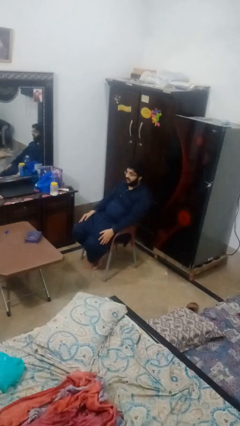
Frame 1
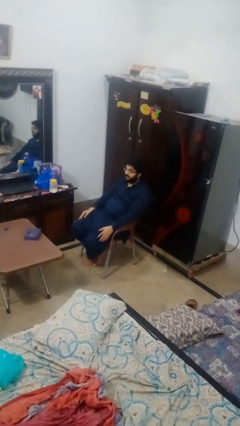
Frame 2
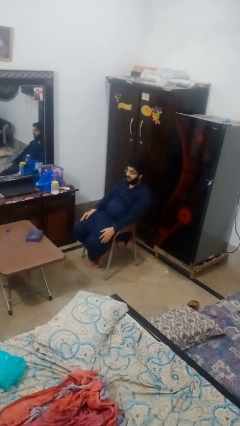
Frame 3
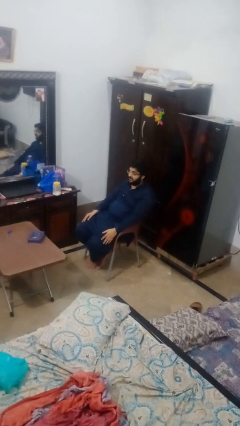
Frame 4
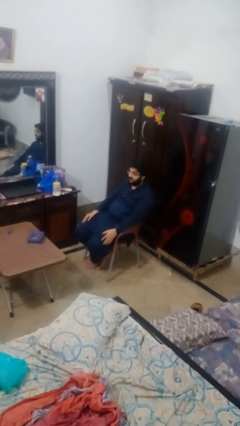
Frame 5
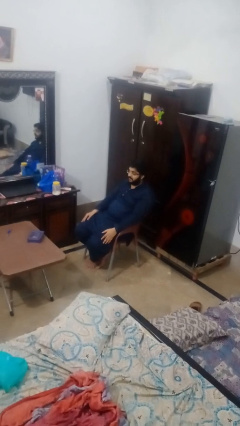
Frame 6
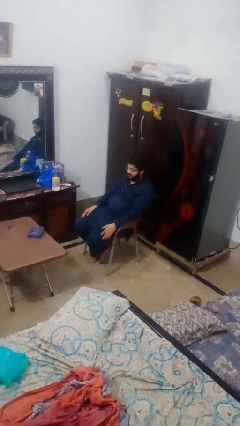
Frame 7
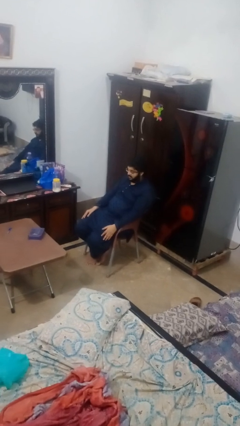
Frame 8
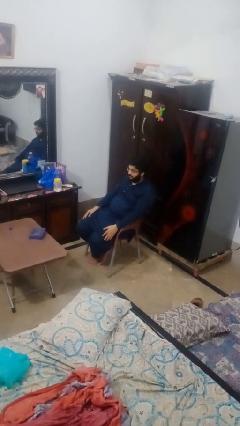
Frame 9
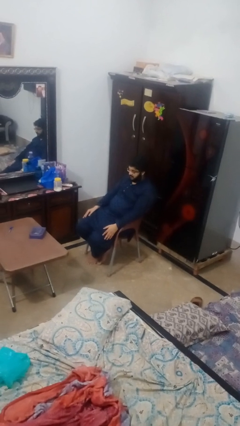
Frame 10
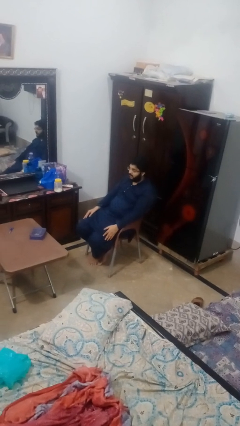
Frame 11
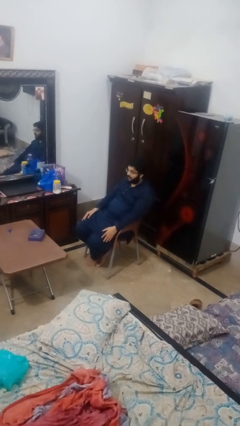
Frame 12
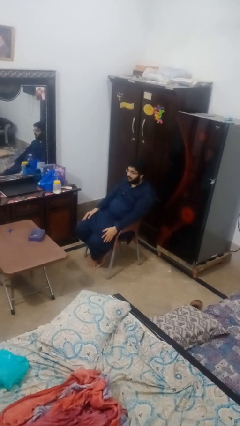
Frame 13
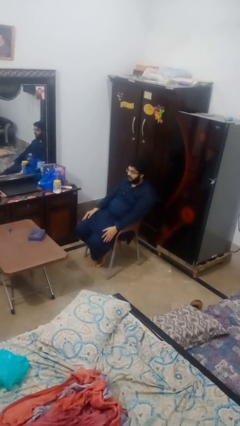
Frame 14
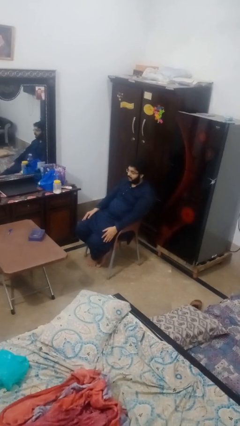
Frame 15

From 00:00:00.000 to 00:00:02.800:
person nods head

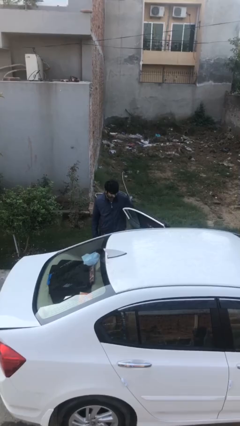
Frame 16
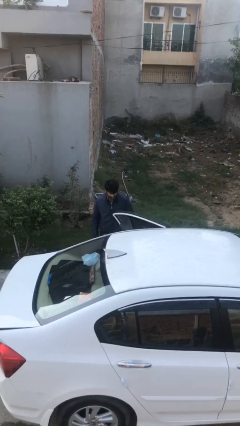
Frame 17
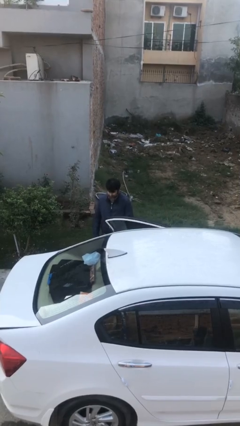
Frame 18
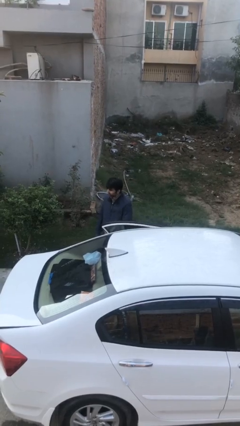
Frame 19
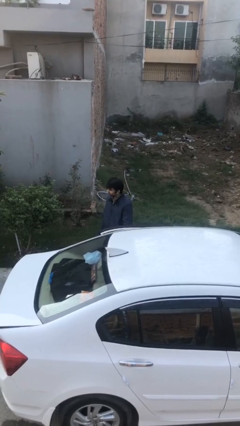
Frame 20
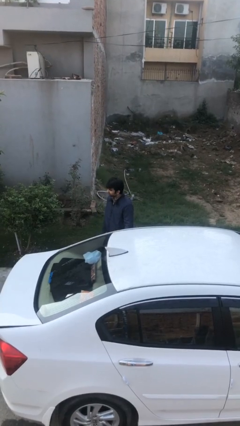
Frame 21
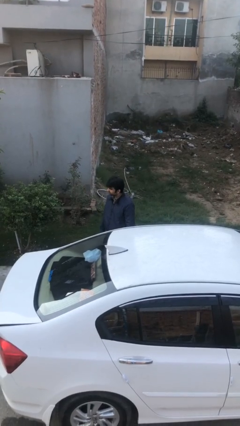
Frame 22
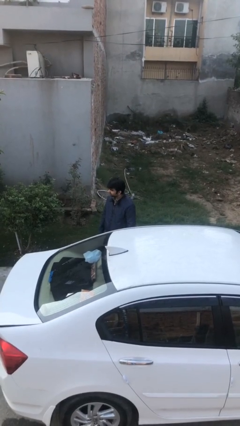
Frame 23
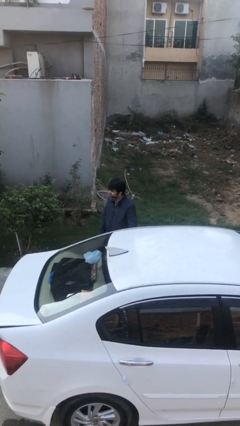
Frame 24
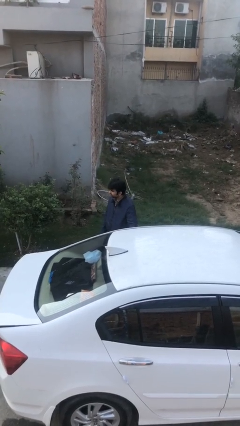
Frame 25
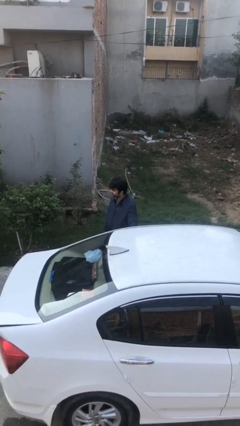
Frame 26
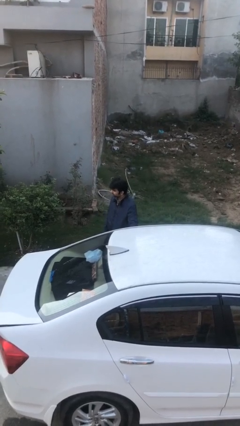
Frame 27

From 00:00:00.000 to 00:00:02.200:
person closes car door

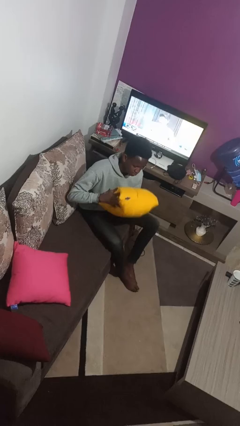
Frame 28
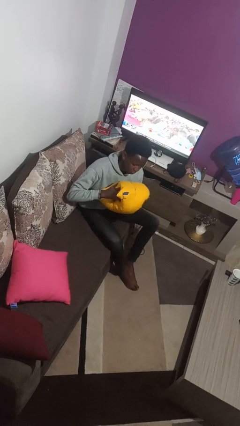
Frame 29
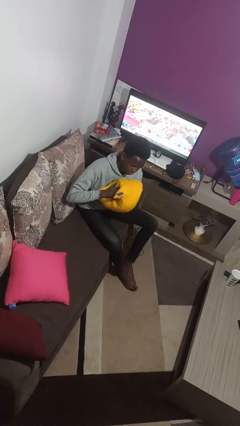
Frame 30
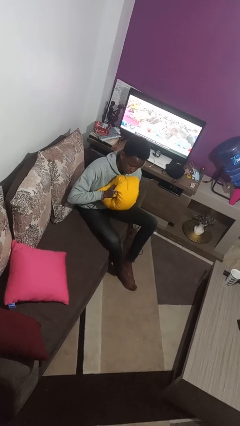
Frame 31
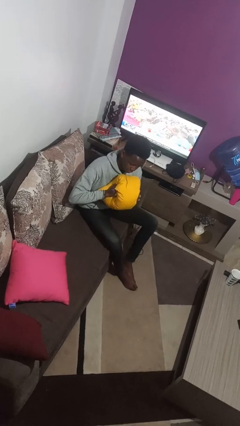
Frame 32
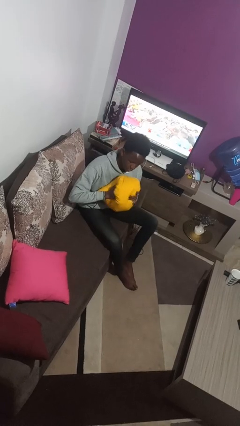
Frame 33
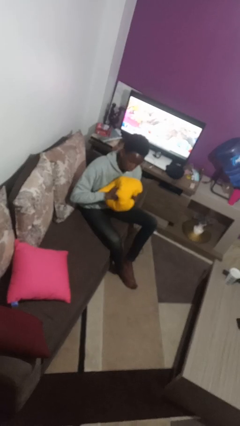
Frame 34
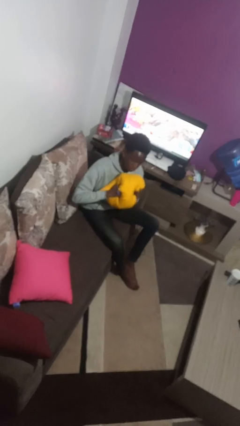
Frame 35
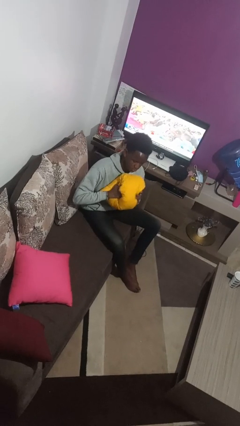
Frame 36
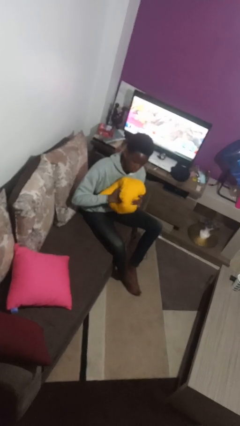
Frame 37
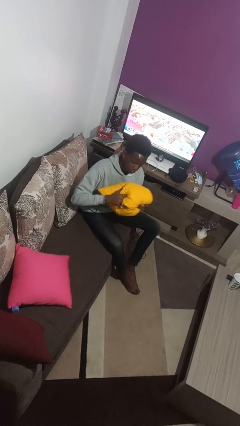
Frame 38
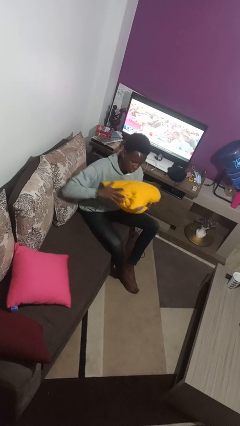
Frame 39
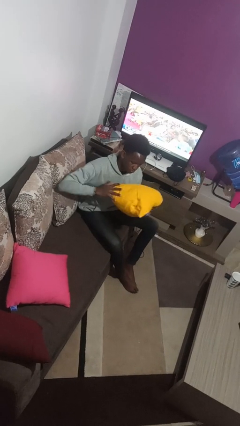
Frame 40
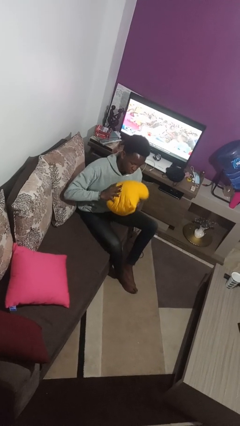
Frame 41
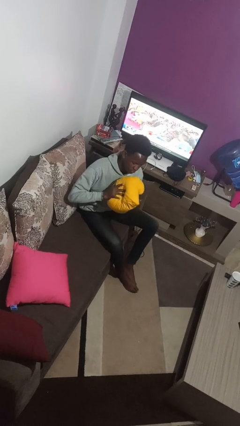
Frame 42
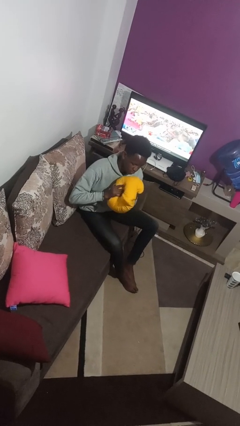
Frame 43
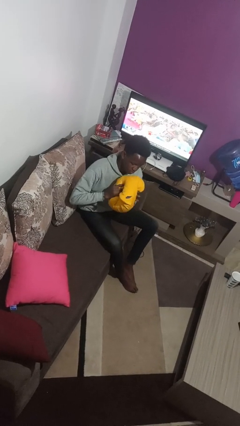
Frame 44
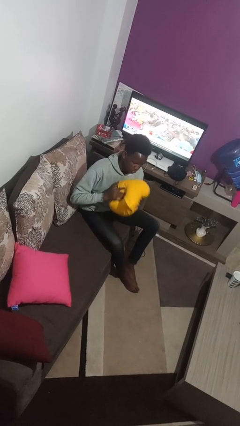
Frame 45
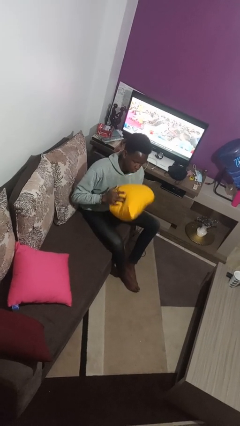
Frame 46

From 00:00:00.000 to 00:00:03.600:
person squeezes object

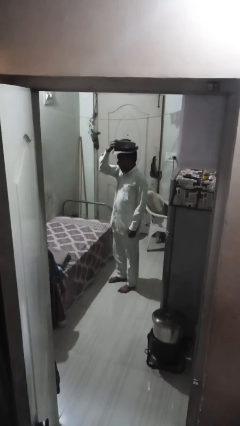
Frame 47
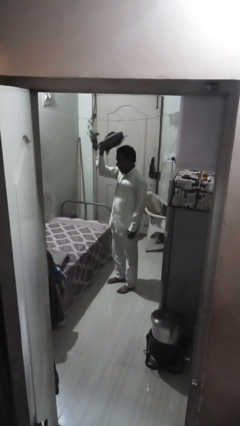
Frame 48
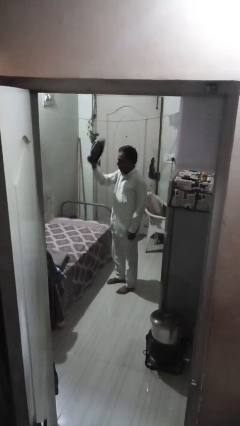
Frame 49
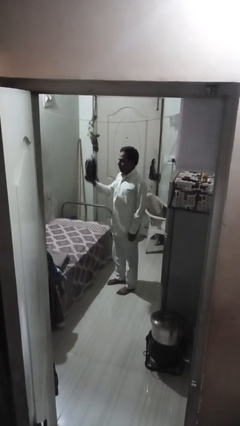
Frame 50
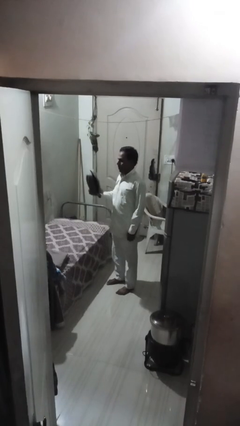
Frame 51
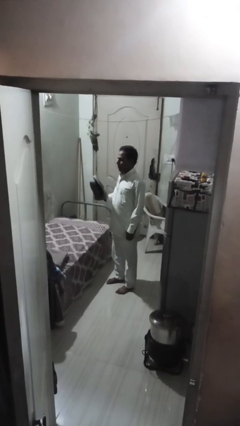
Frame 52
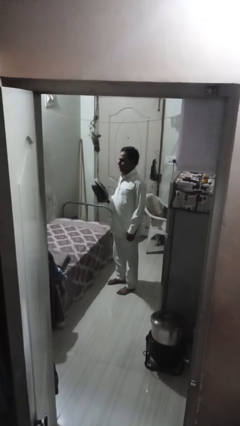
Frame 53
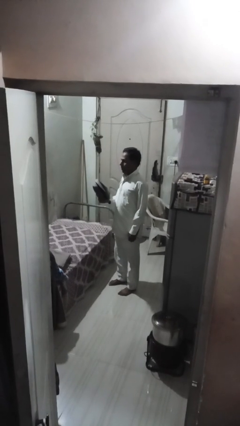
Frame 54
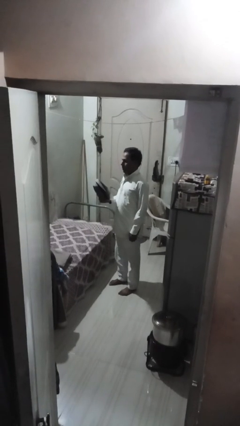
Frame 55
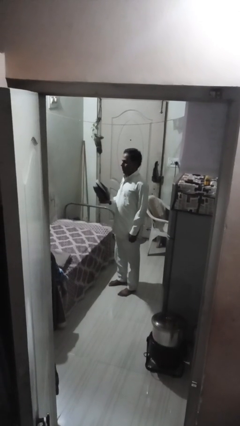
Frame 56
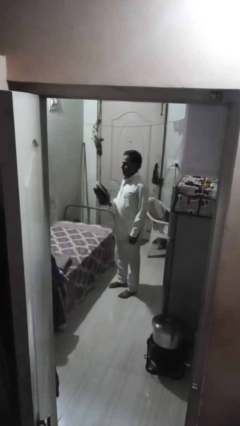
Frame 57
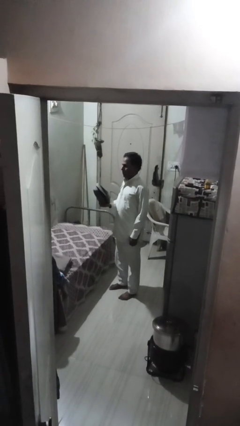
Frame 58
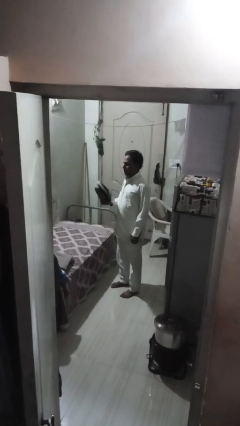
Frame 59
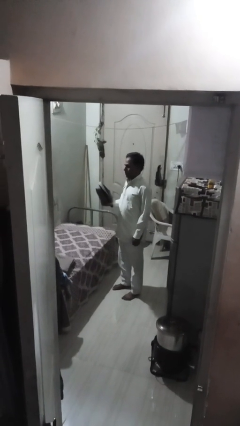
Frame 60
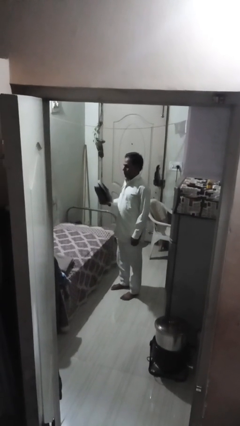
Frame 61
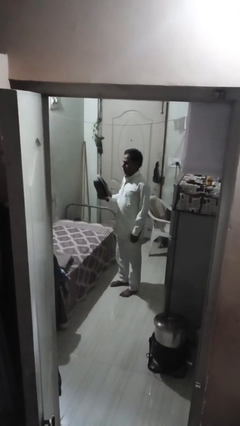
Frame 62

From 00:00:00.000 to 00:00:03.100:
person takes off hat

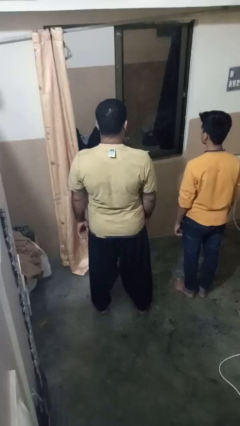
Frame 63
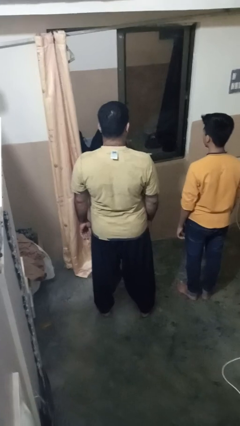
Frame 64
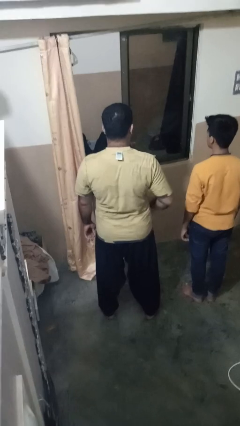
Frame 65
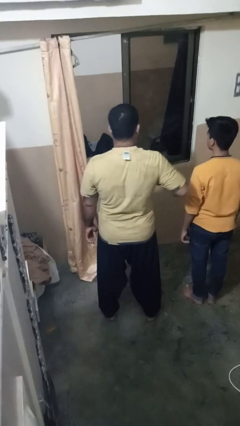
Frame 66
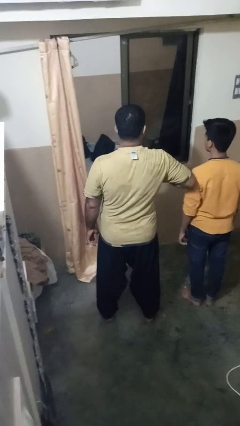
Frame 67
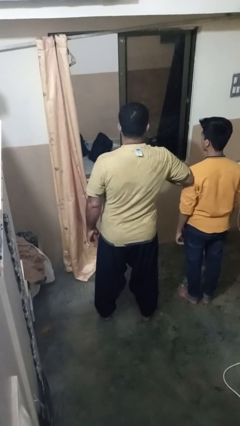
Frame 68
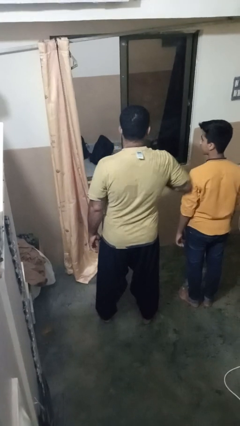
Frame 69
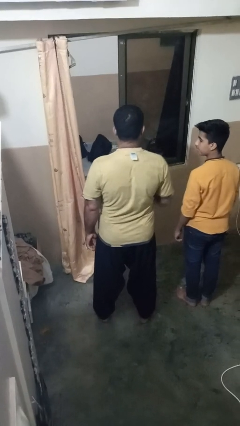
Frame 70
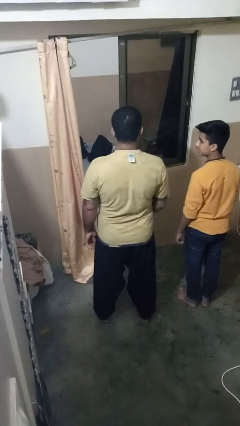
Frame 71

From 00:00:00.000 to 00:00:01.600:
person nudges person with elbow

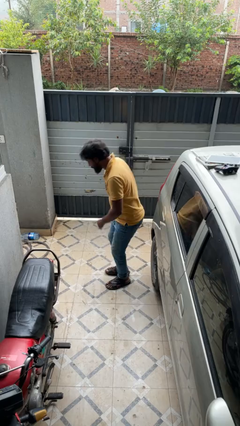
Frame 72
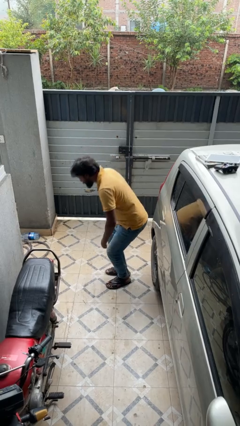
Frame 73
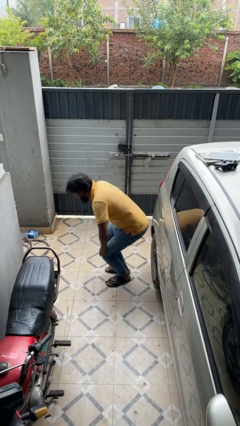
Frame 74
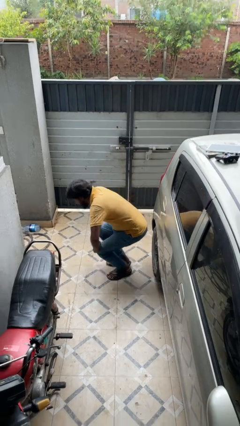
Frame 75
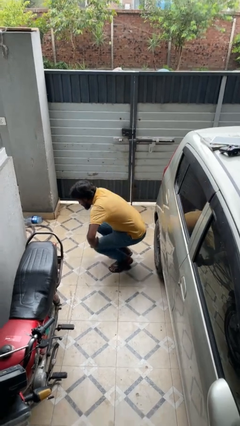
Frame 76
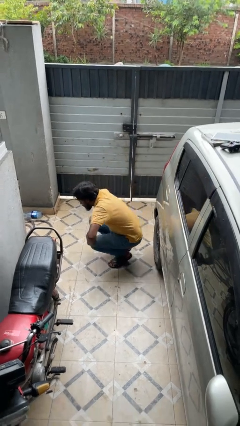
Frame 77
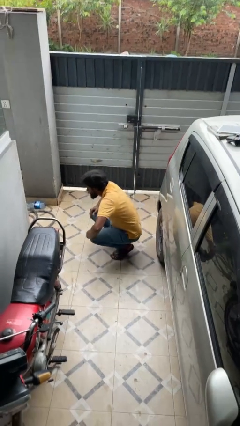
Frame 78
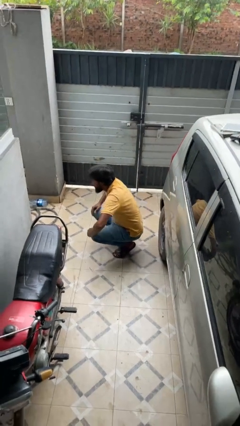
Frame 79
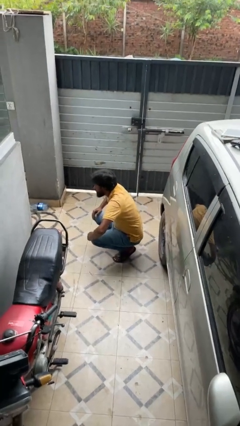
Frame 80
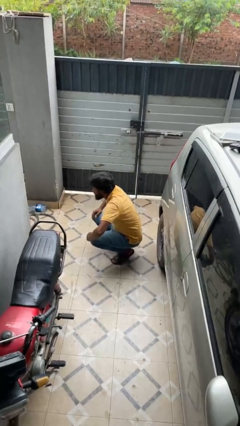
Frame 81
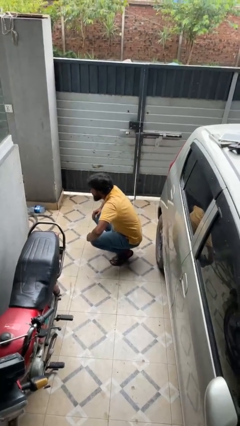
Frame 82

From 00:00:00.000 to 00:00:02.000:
person squats

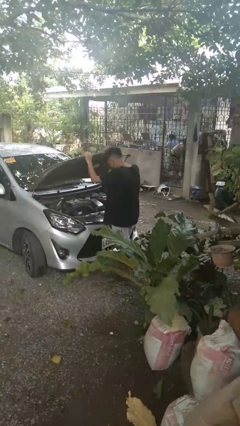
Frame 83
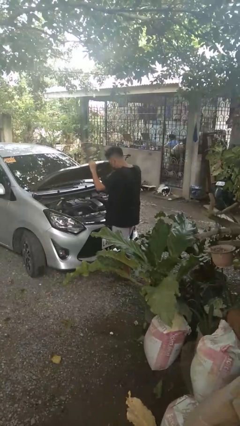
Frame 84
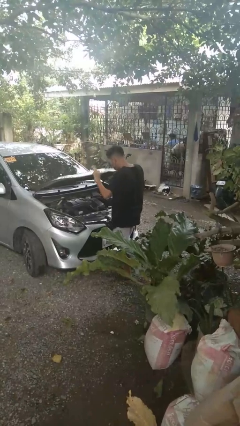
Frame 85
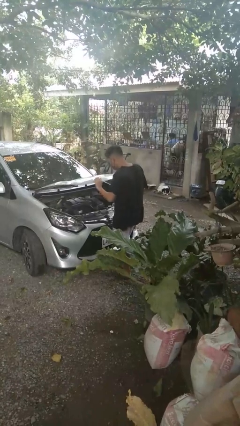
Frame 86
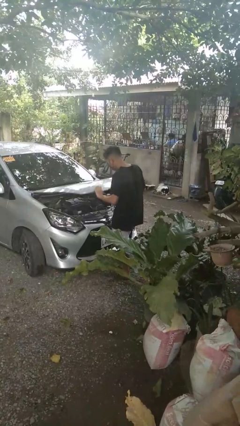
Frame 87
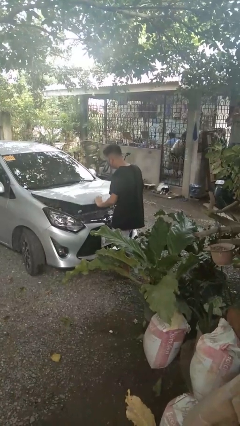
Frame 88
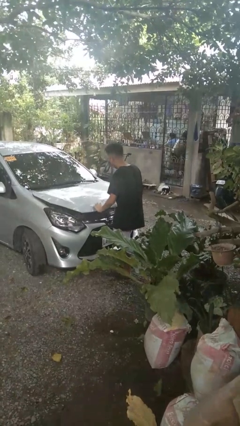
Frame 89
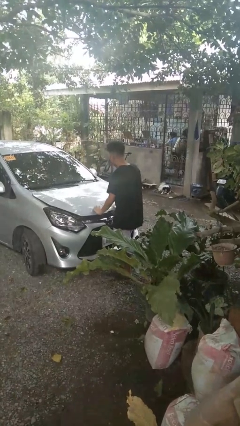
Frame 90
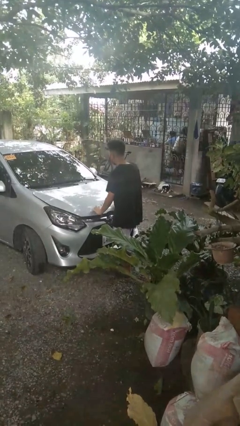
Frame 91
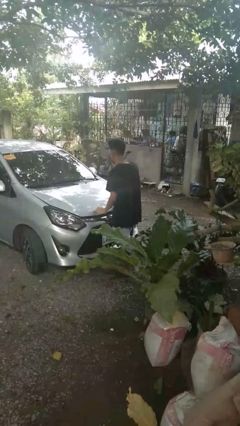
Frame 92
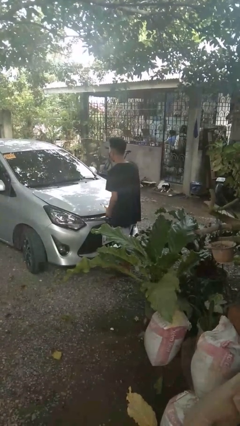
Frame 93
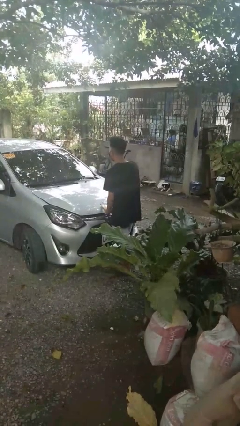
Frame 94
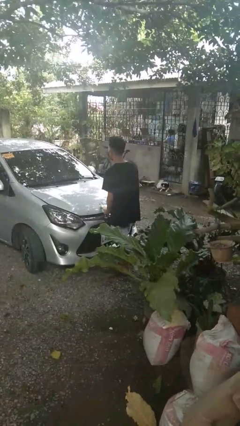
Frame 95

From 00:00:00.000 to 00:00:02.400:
person closes car hood
